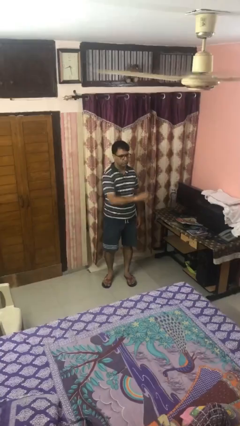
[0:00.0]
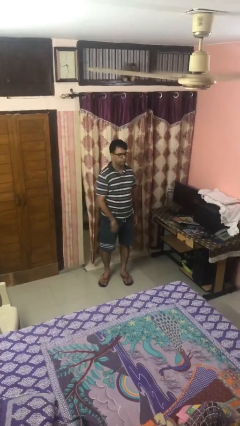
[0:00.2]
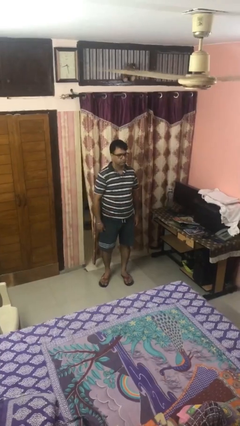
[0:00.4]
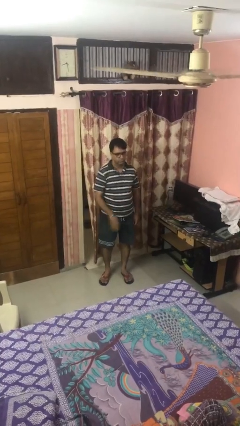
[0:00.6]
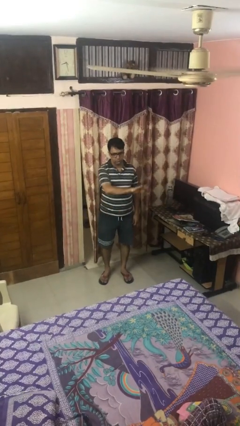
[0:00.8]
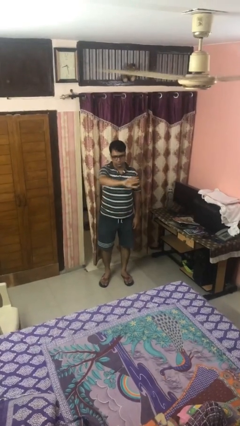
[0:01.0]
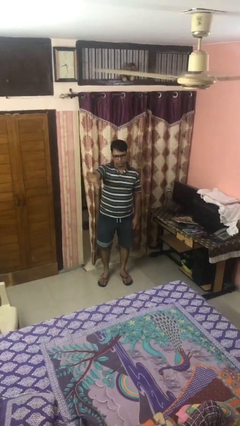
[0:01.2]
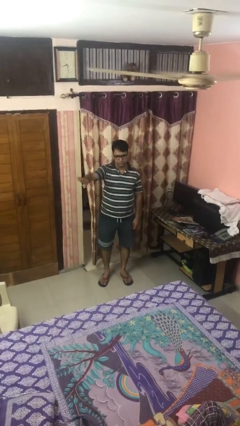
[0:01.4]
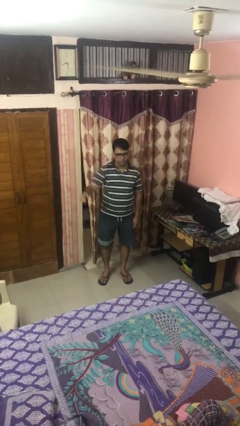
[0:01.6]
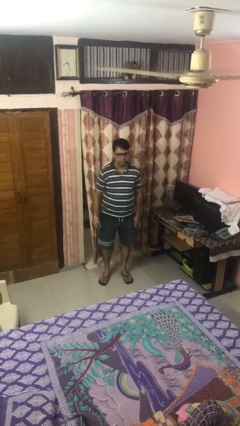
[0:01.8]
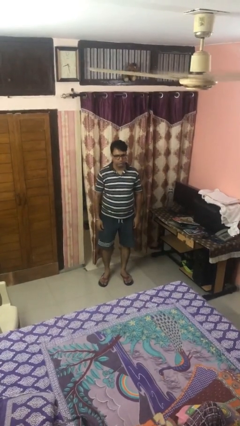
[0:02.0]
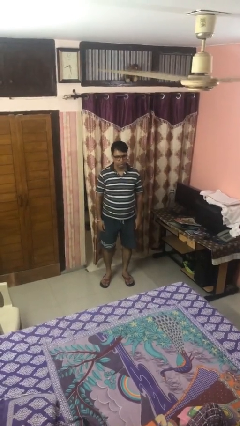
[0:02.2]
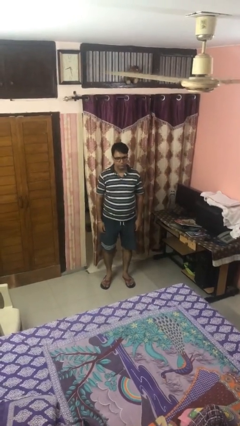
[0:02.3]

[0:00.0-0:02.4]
person gestures swipe right

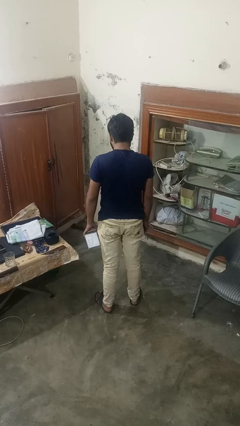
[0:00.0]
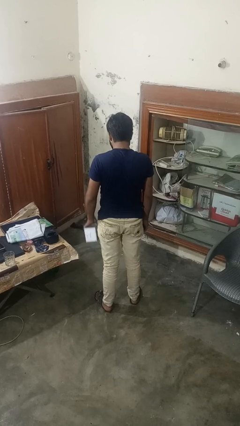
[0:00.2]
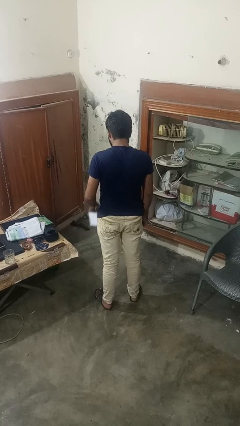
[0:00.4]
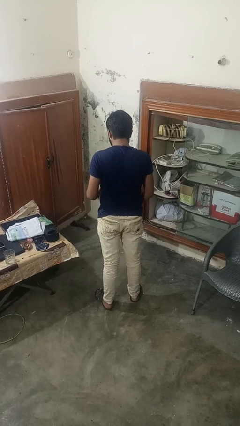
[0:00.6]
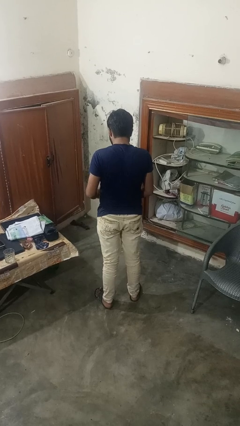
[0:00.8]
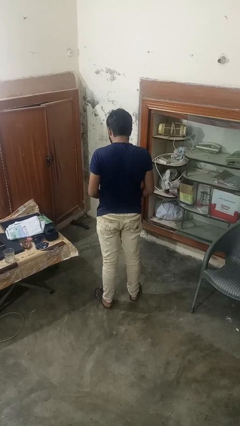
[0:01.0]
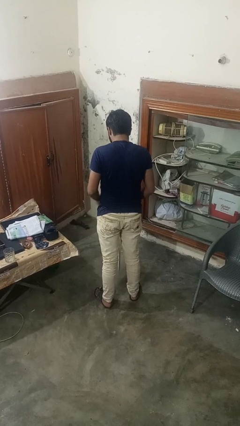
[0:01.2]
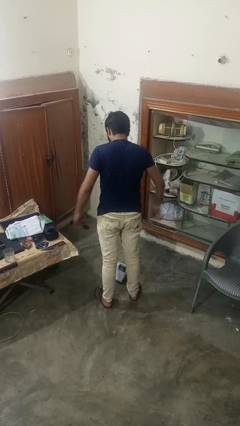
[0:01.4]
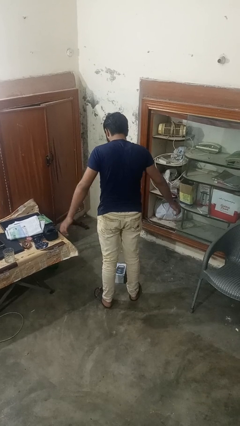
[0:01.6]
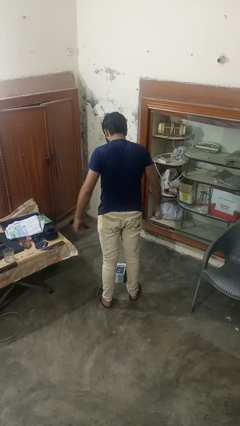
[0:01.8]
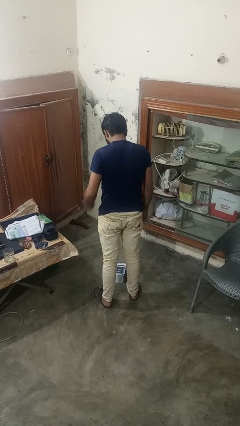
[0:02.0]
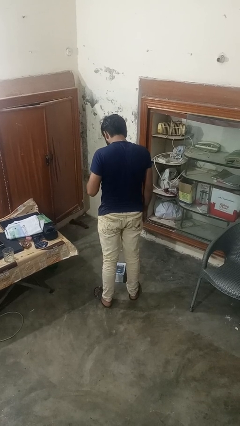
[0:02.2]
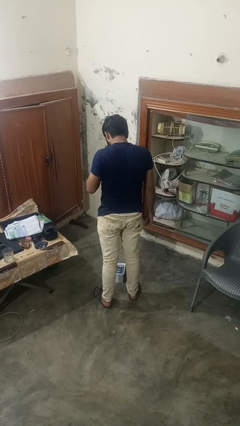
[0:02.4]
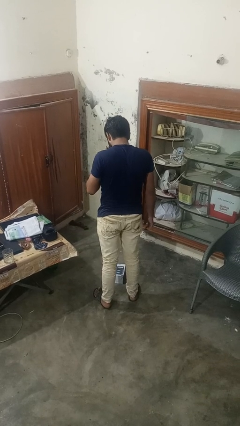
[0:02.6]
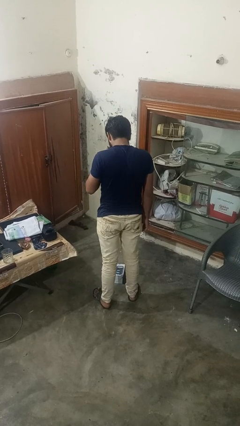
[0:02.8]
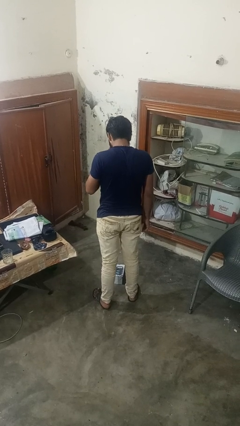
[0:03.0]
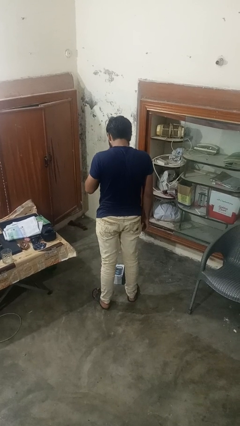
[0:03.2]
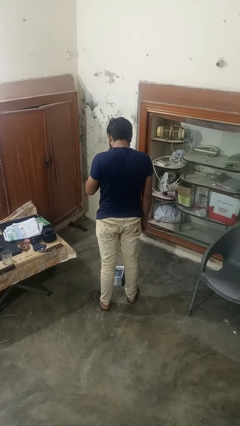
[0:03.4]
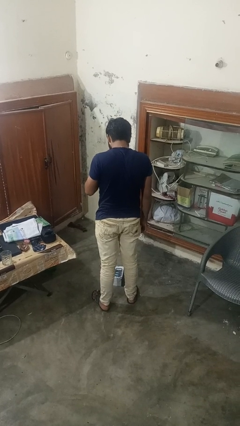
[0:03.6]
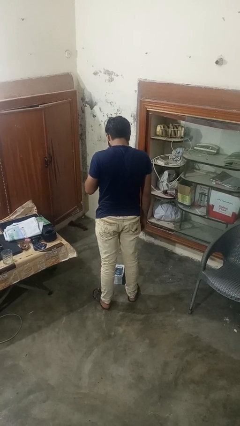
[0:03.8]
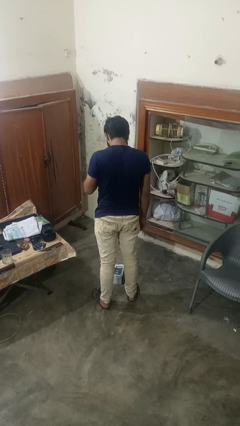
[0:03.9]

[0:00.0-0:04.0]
person drops object

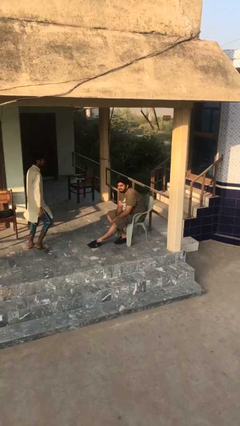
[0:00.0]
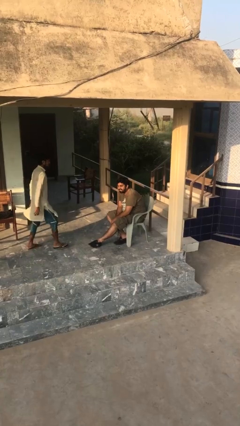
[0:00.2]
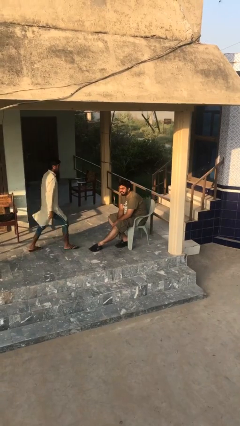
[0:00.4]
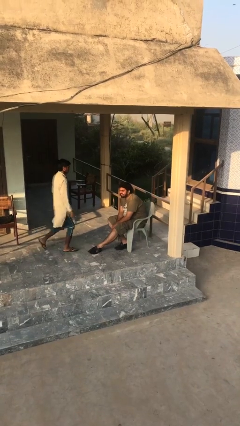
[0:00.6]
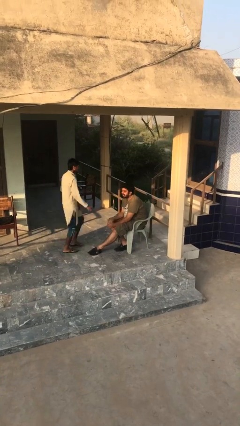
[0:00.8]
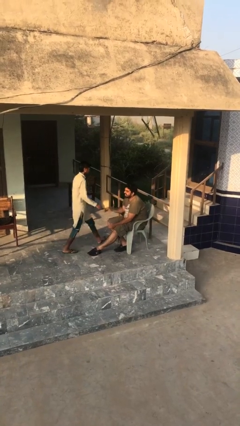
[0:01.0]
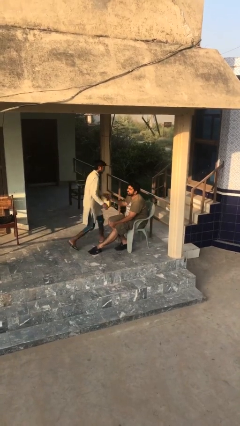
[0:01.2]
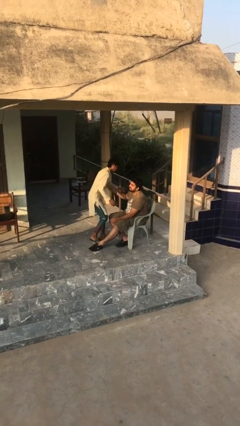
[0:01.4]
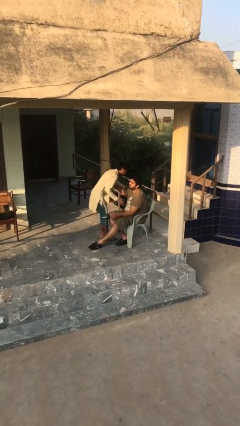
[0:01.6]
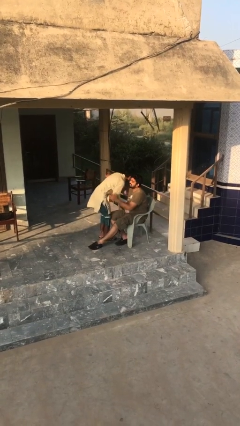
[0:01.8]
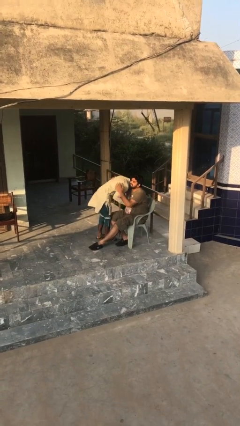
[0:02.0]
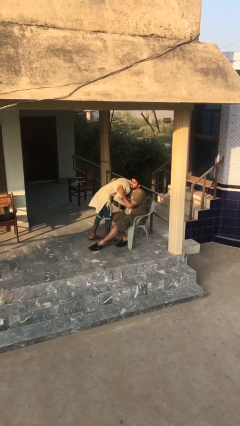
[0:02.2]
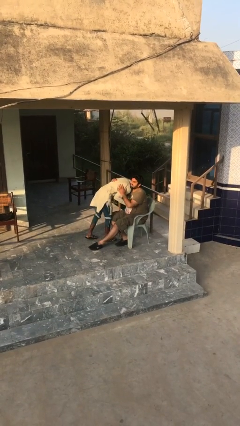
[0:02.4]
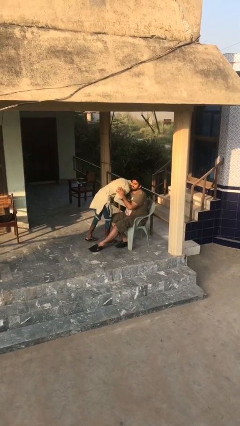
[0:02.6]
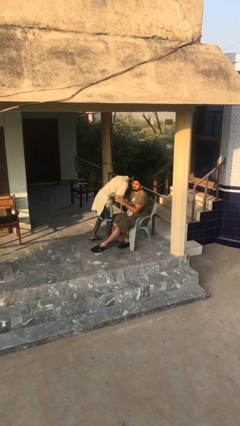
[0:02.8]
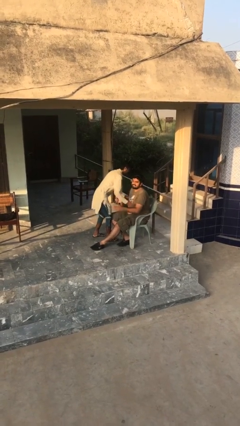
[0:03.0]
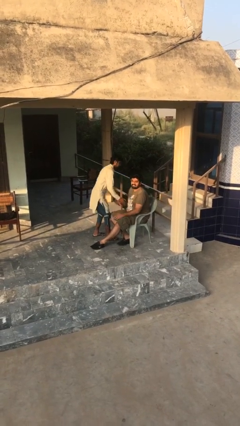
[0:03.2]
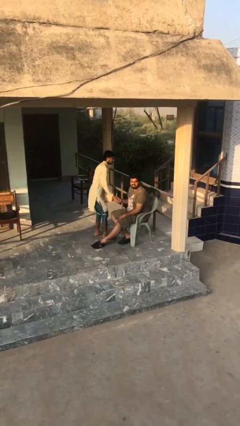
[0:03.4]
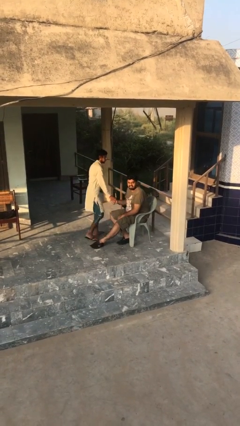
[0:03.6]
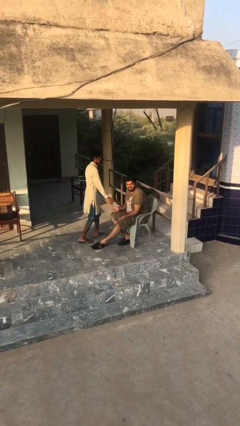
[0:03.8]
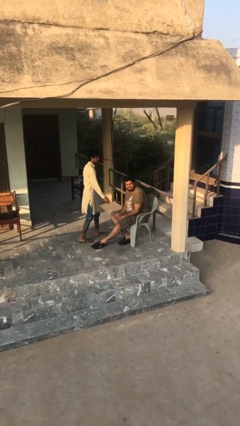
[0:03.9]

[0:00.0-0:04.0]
person embraces person

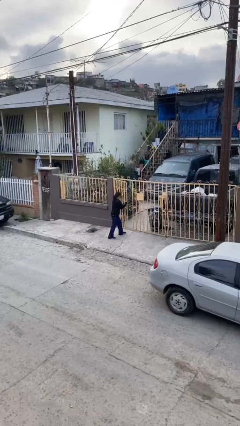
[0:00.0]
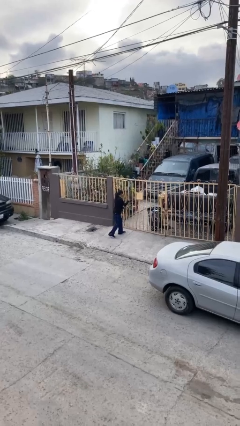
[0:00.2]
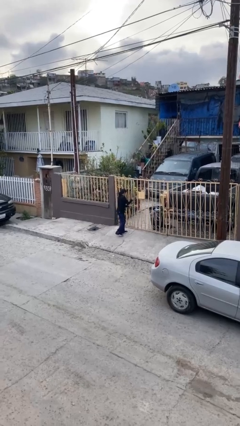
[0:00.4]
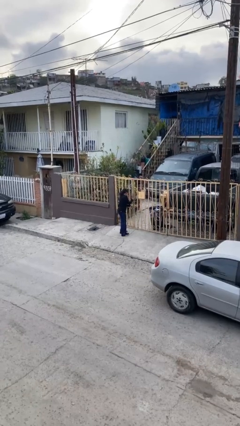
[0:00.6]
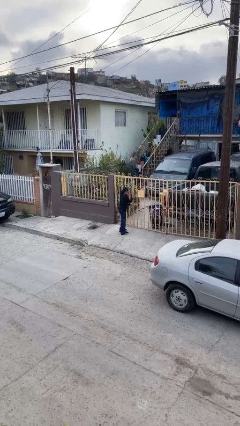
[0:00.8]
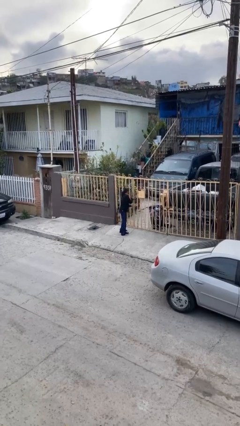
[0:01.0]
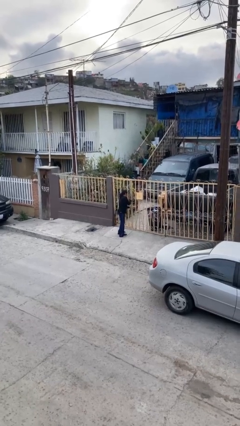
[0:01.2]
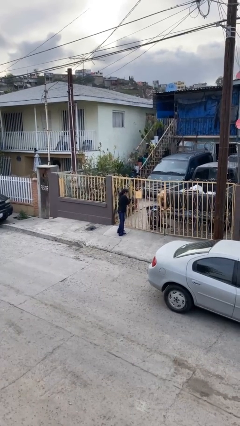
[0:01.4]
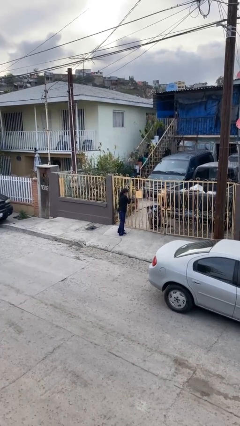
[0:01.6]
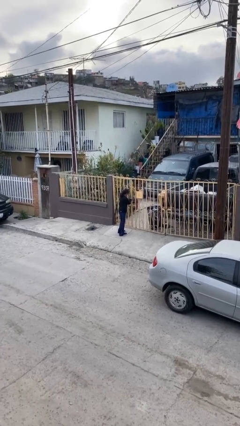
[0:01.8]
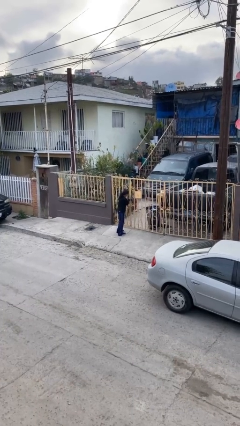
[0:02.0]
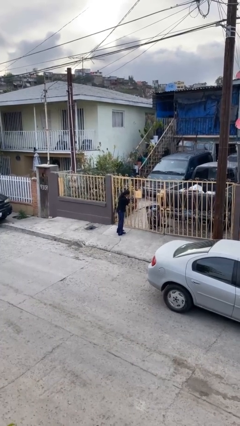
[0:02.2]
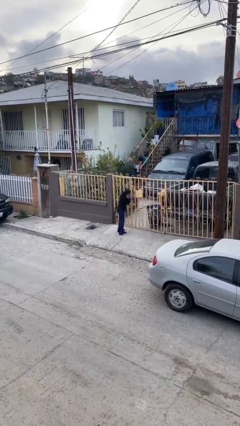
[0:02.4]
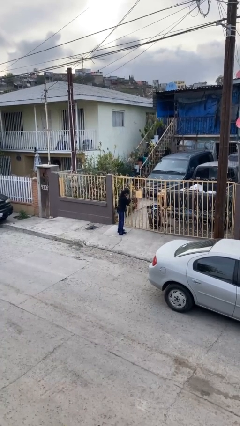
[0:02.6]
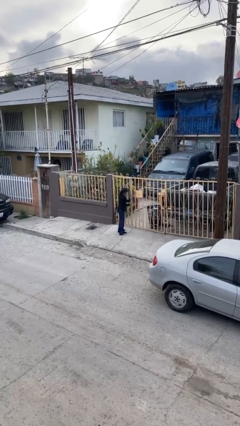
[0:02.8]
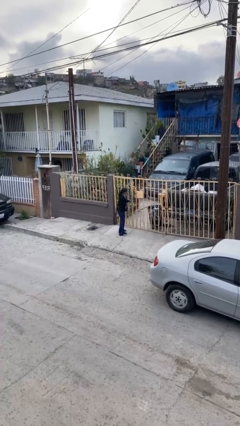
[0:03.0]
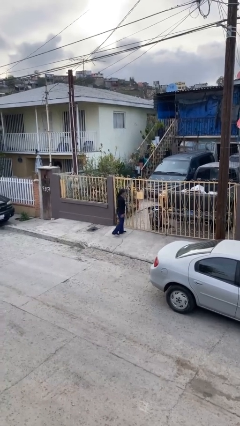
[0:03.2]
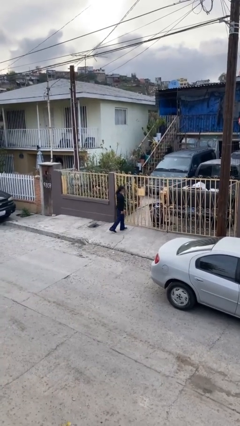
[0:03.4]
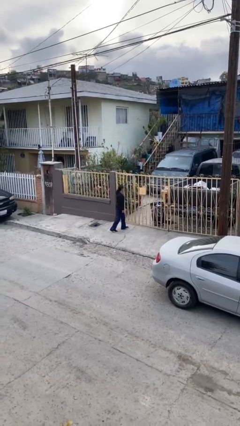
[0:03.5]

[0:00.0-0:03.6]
person closes facility door

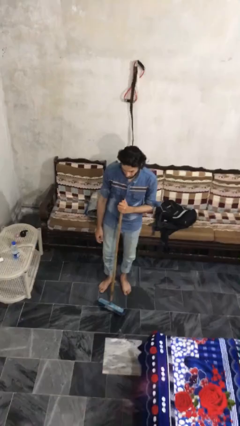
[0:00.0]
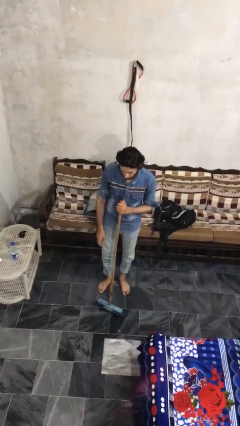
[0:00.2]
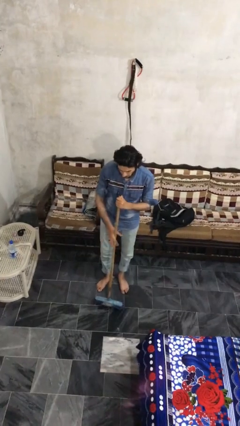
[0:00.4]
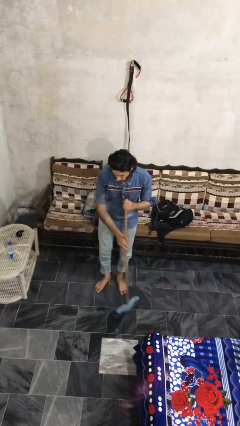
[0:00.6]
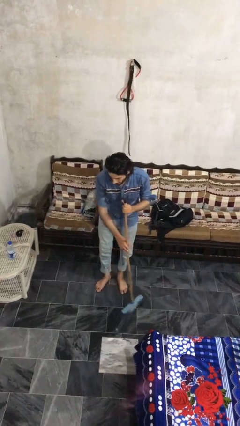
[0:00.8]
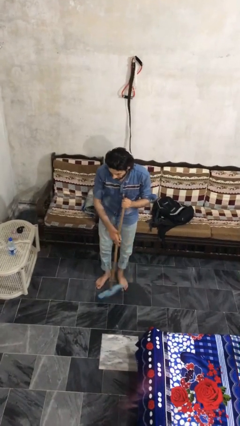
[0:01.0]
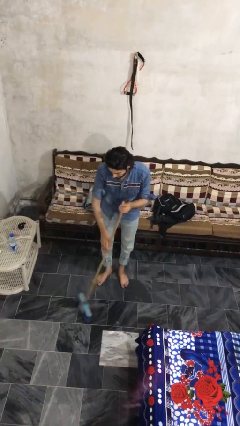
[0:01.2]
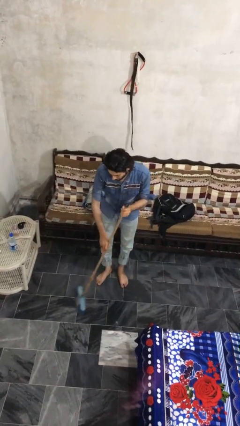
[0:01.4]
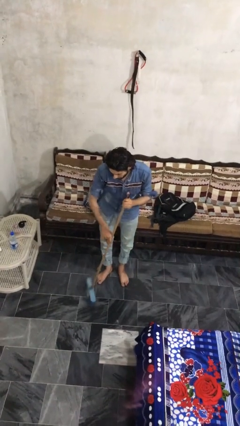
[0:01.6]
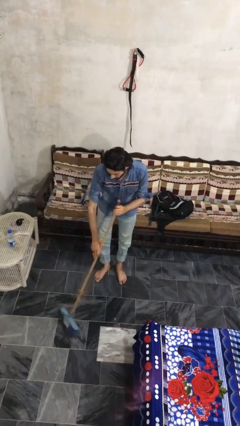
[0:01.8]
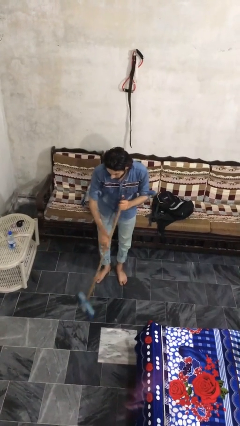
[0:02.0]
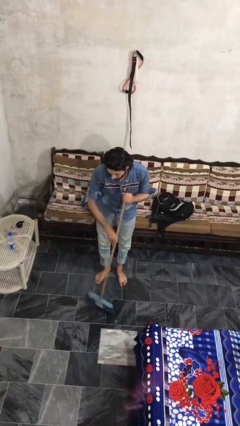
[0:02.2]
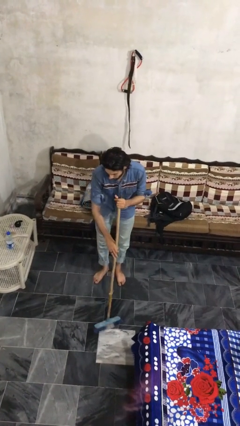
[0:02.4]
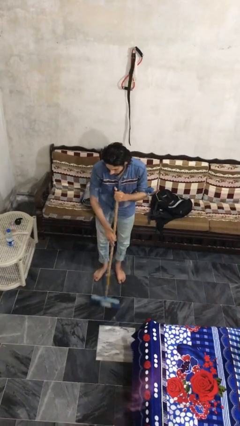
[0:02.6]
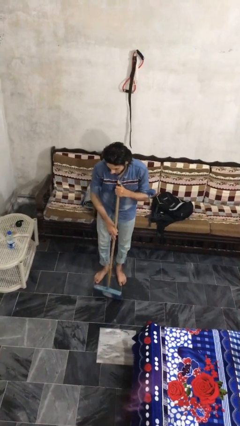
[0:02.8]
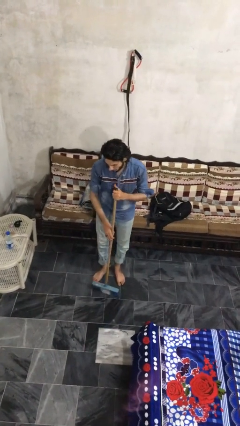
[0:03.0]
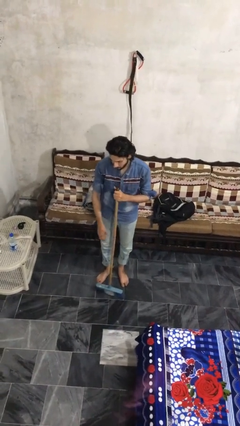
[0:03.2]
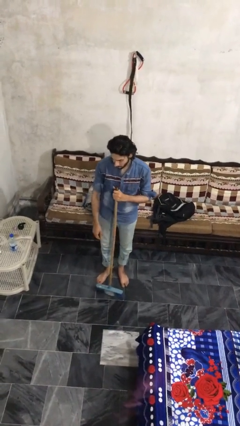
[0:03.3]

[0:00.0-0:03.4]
person sweeps floor

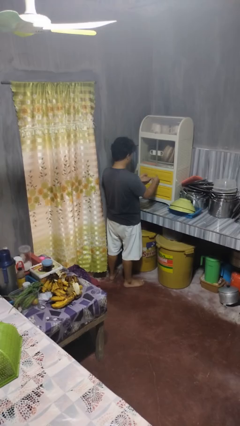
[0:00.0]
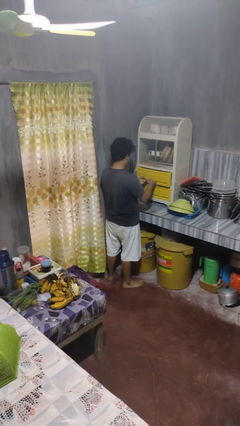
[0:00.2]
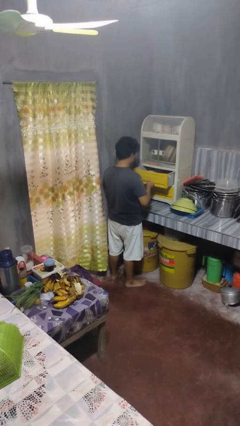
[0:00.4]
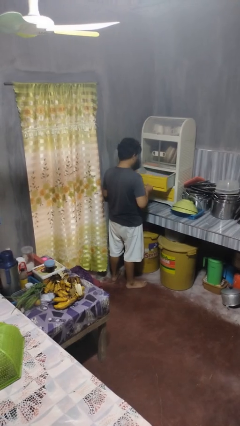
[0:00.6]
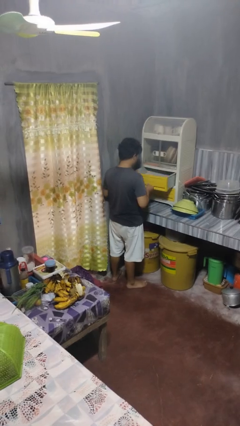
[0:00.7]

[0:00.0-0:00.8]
person opens kitchen drawer
